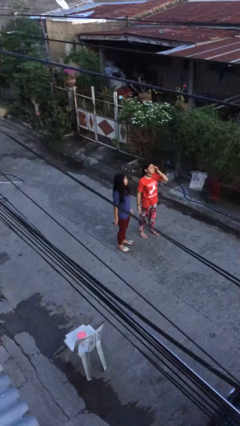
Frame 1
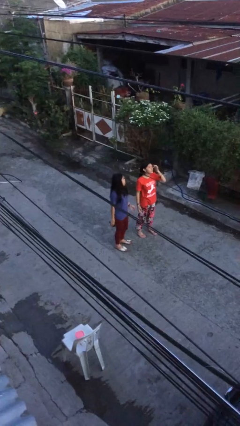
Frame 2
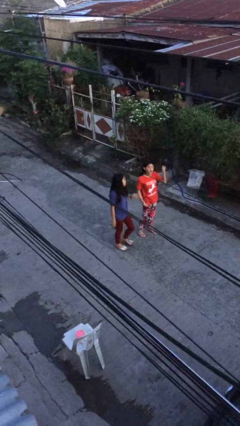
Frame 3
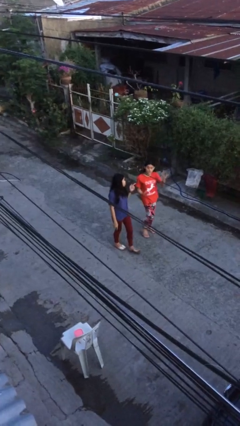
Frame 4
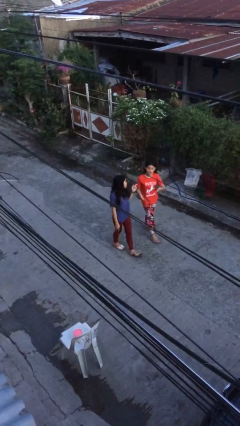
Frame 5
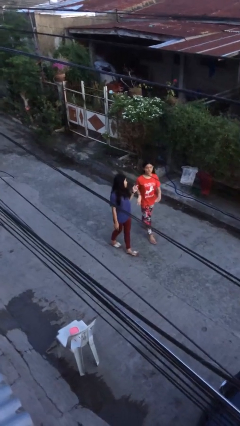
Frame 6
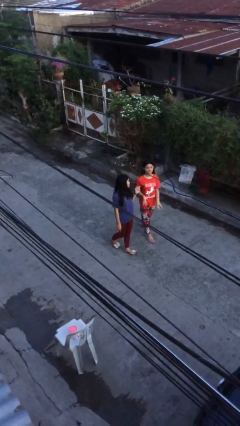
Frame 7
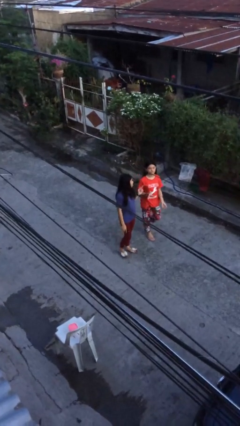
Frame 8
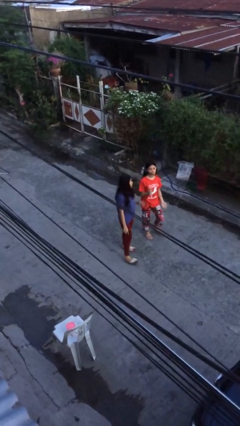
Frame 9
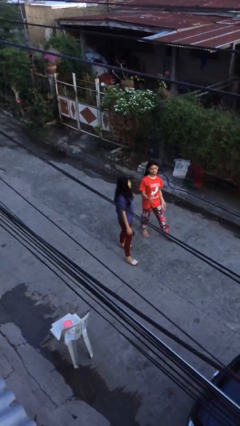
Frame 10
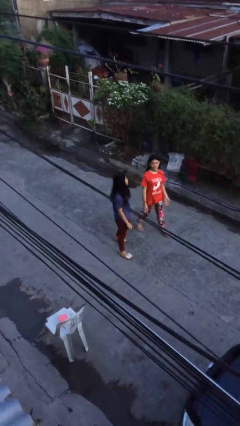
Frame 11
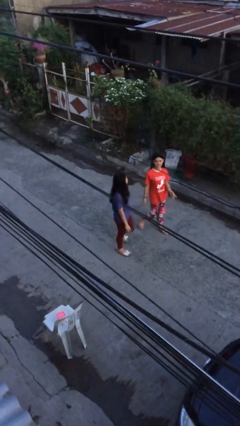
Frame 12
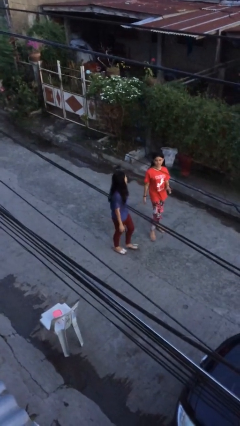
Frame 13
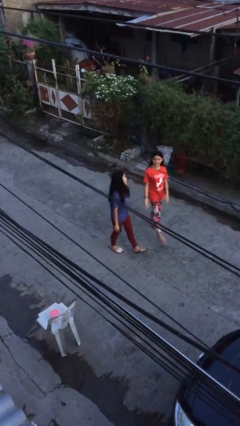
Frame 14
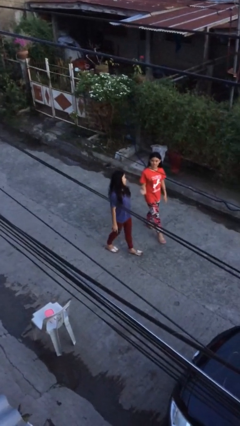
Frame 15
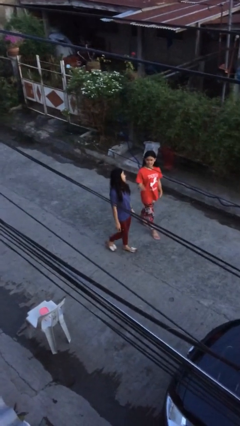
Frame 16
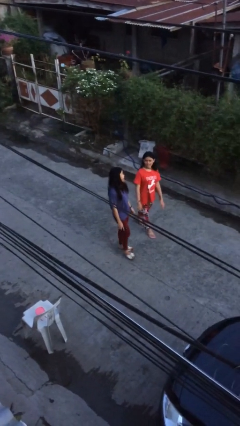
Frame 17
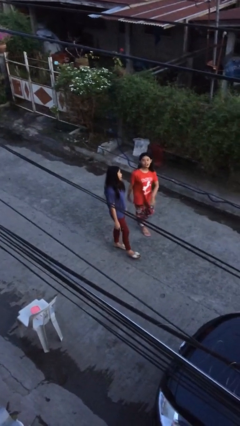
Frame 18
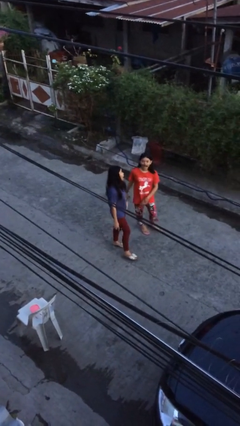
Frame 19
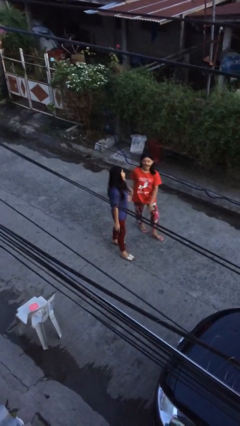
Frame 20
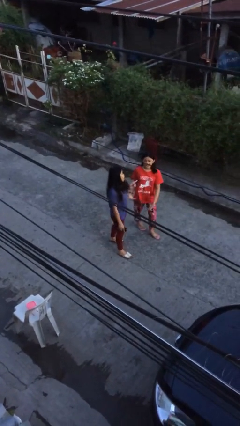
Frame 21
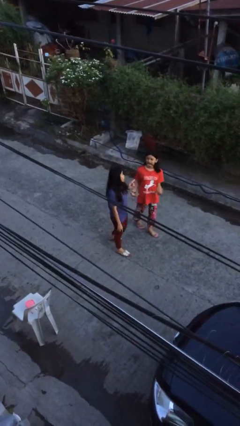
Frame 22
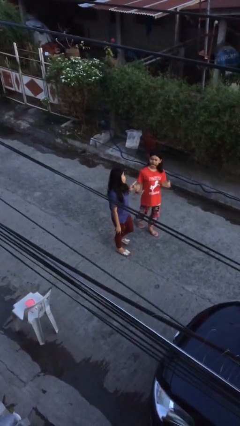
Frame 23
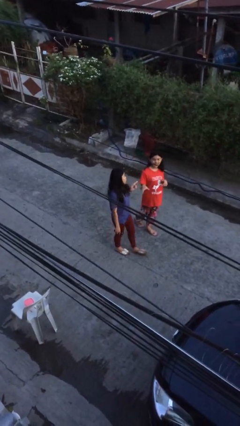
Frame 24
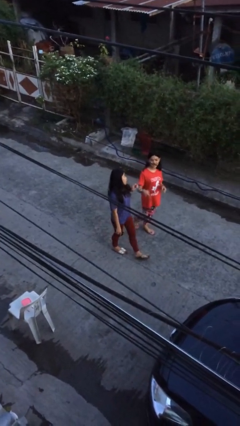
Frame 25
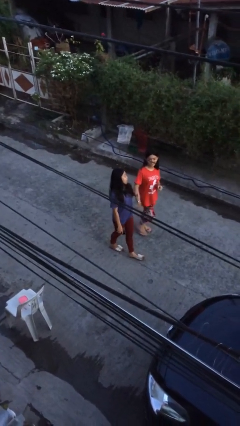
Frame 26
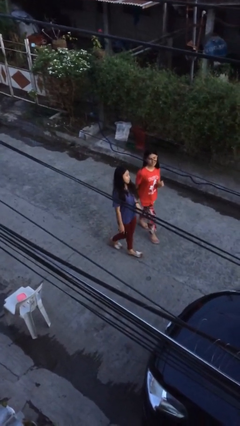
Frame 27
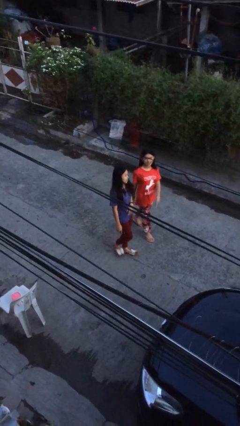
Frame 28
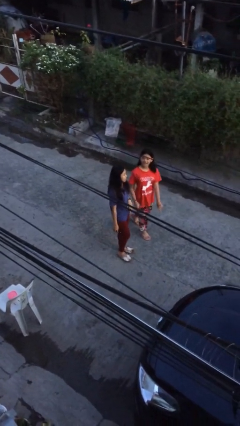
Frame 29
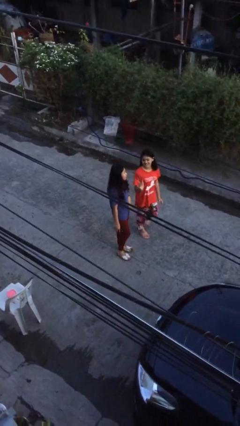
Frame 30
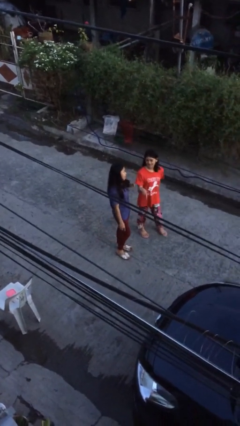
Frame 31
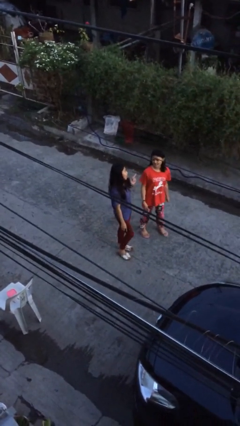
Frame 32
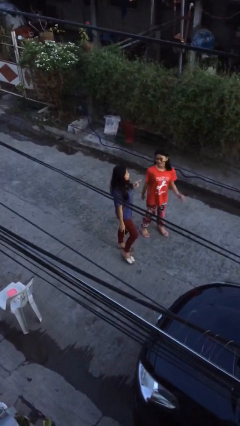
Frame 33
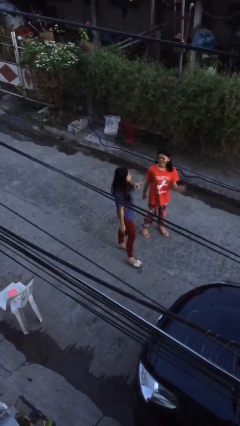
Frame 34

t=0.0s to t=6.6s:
person talks to person

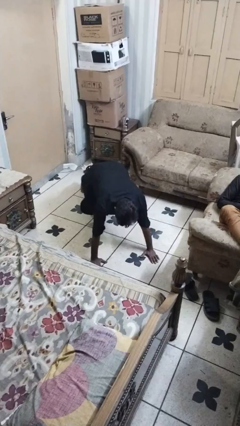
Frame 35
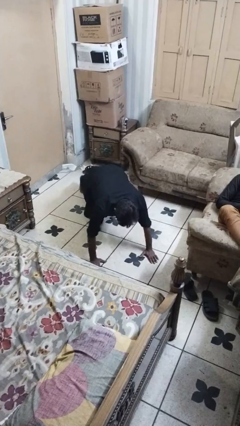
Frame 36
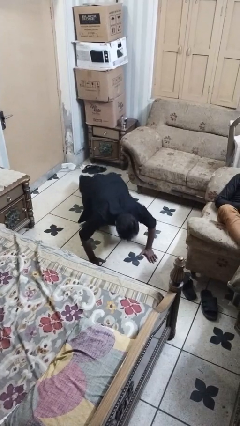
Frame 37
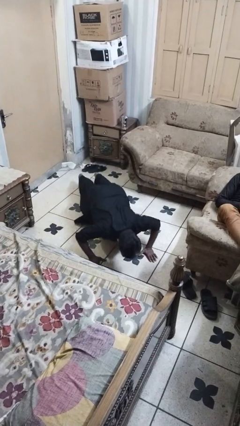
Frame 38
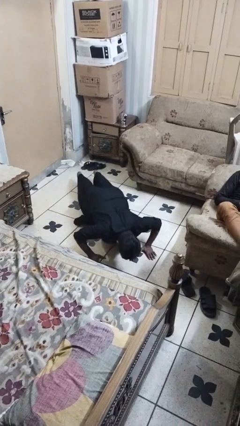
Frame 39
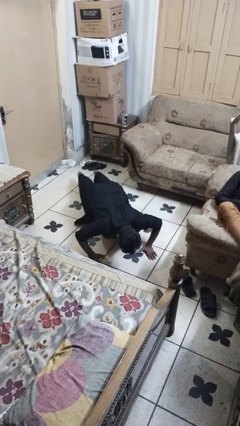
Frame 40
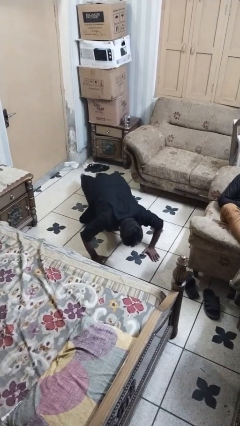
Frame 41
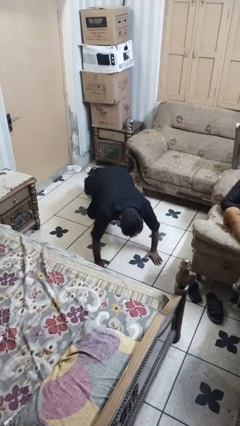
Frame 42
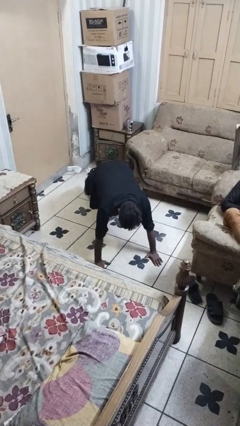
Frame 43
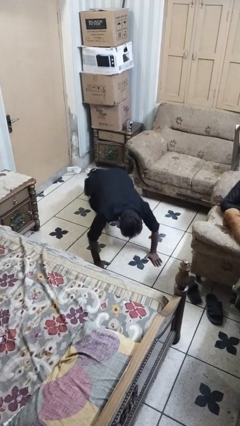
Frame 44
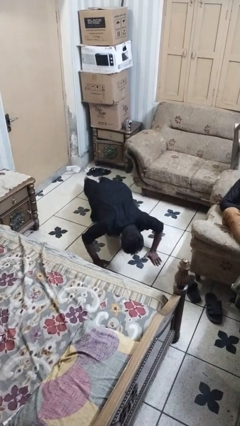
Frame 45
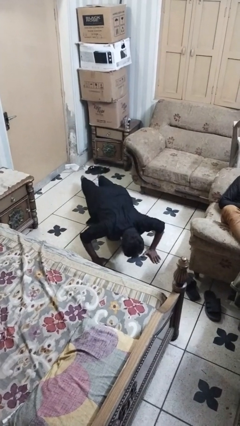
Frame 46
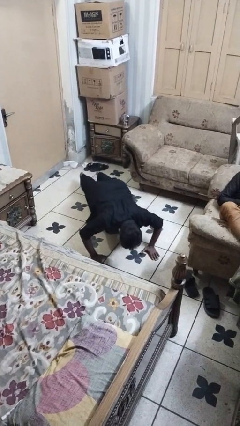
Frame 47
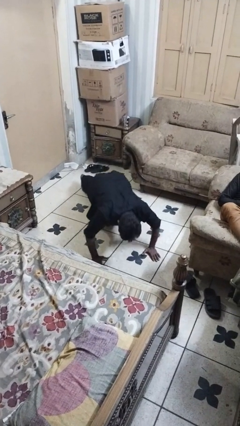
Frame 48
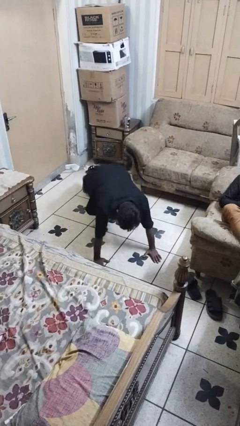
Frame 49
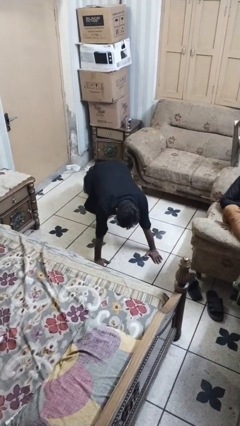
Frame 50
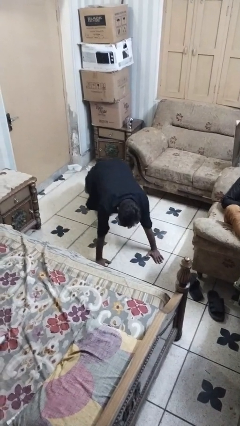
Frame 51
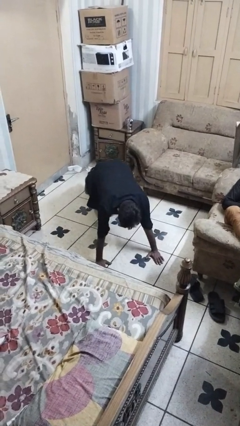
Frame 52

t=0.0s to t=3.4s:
person exercises with pushup

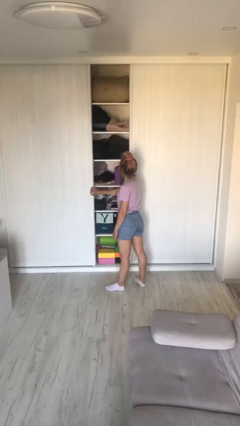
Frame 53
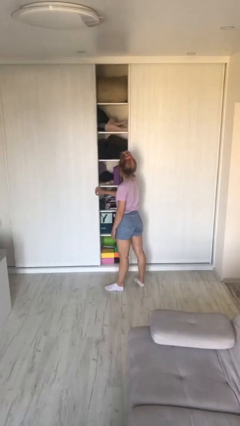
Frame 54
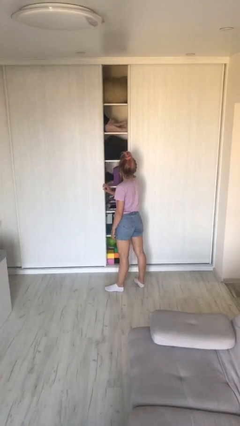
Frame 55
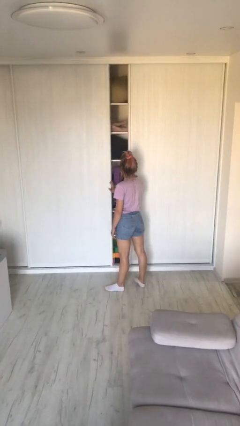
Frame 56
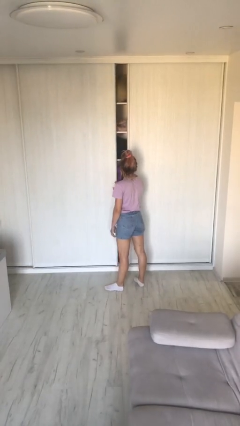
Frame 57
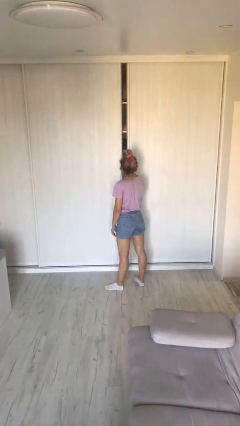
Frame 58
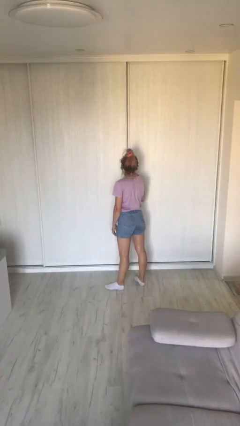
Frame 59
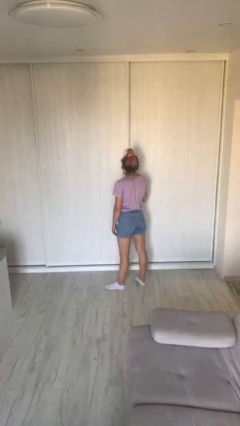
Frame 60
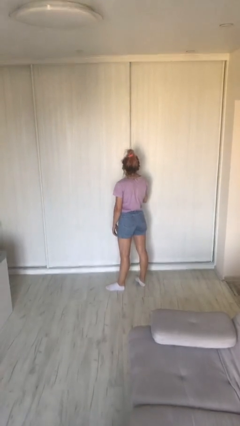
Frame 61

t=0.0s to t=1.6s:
person closes sliding door

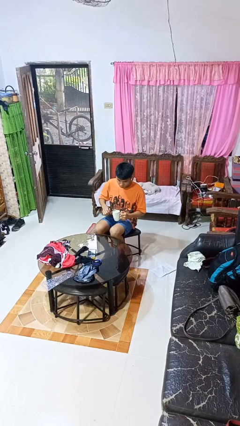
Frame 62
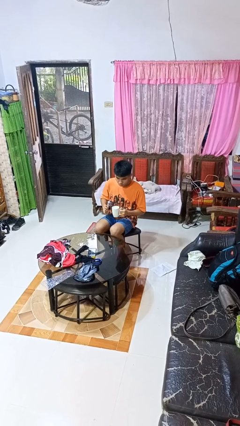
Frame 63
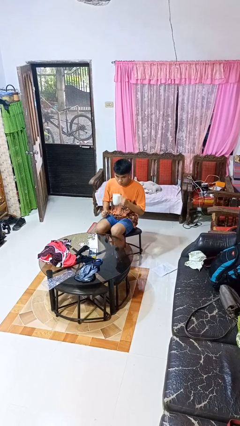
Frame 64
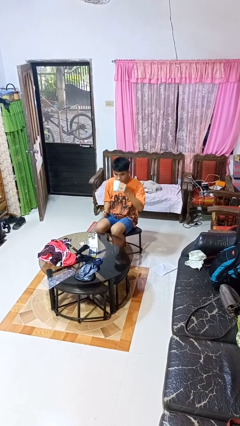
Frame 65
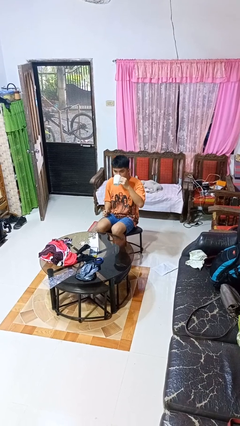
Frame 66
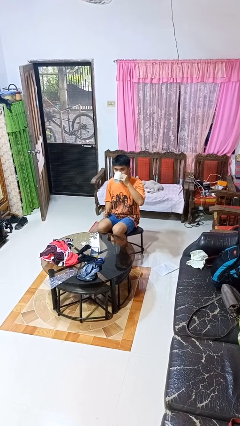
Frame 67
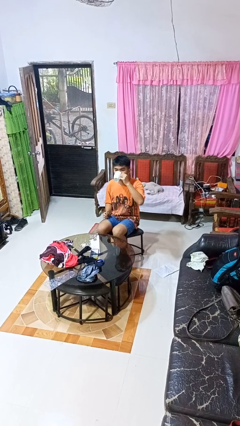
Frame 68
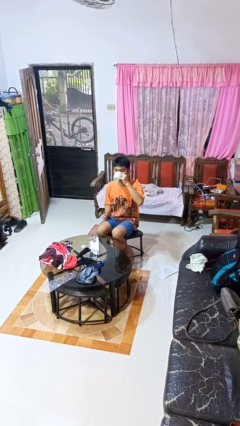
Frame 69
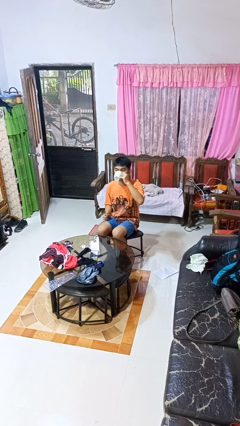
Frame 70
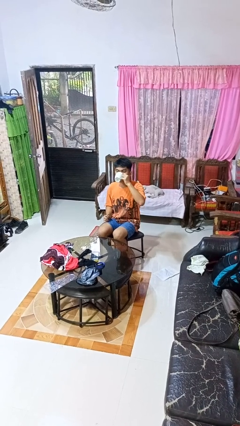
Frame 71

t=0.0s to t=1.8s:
person drinks from mug

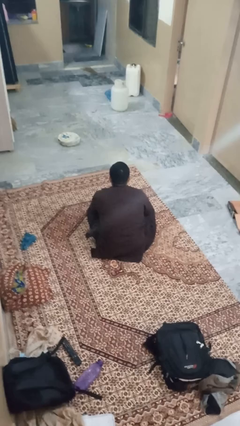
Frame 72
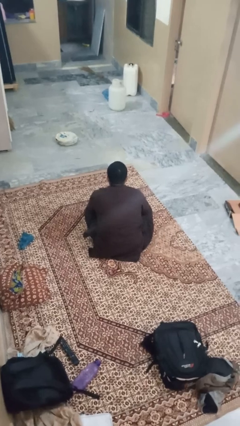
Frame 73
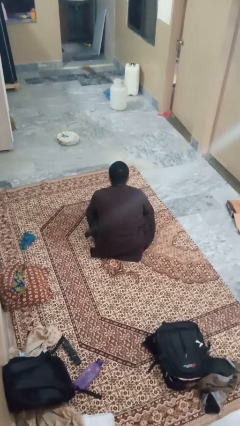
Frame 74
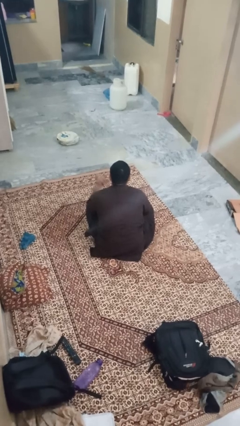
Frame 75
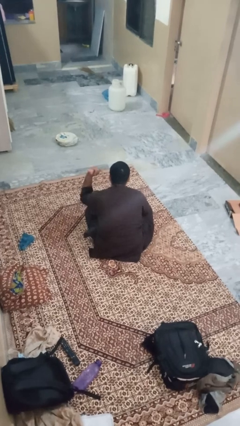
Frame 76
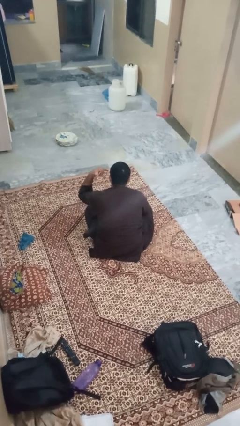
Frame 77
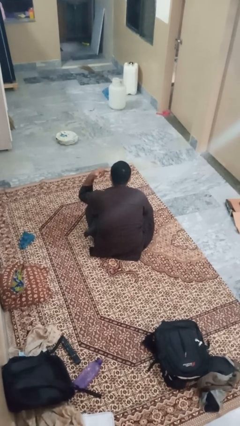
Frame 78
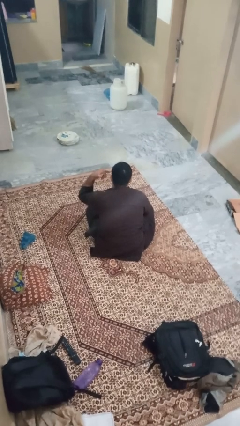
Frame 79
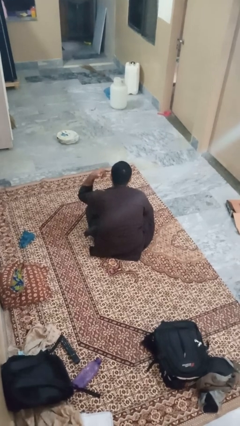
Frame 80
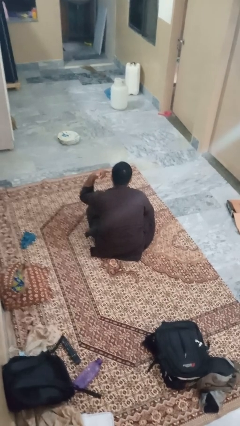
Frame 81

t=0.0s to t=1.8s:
person gestures call me

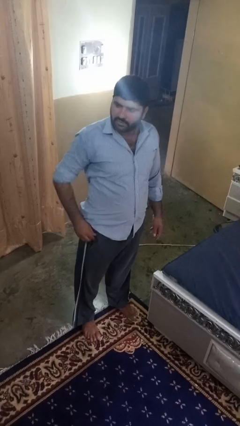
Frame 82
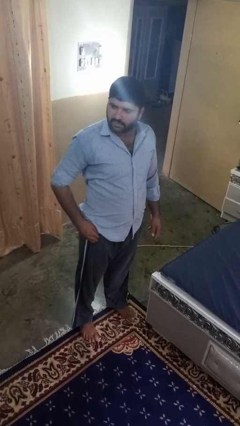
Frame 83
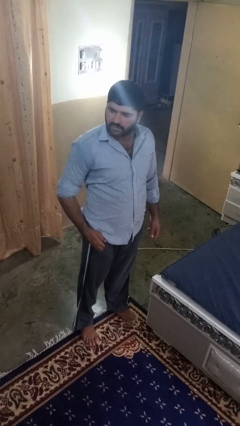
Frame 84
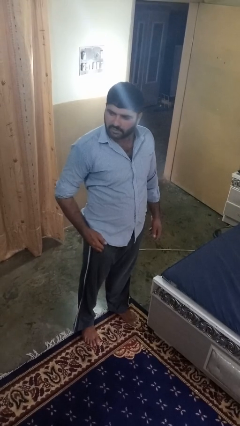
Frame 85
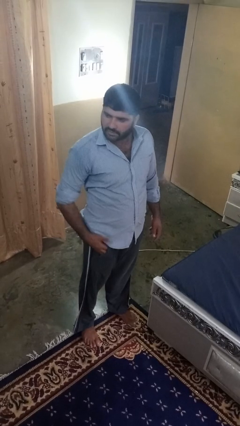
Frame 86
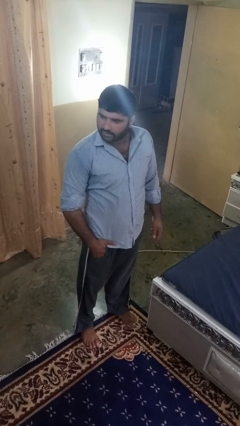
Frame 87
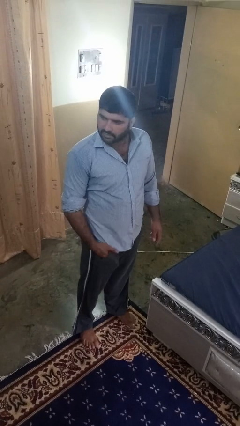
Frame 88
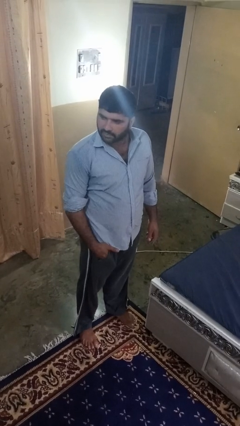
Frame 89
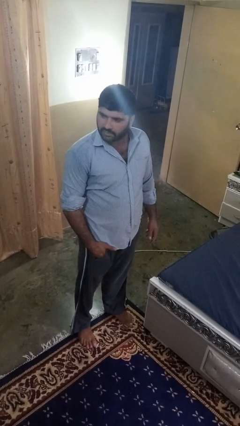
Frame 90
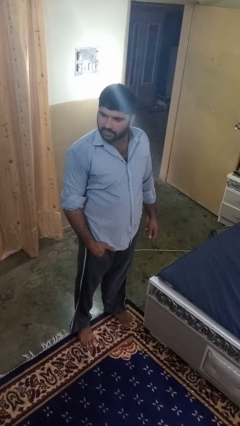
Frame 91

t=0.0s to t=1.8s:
person puts hands in back pockets
